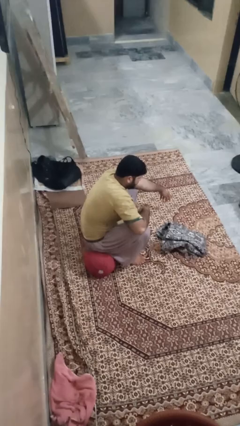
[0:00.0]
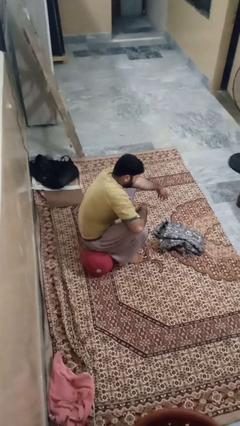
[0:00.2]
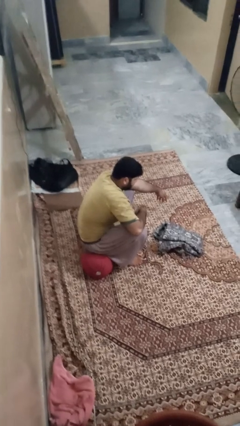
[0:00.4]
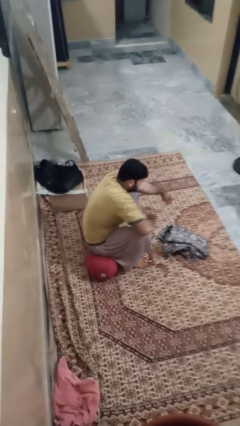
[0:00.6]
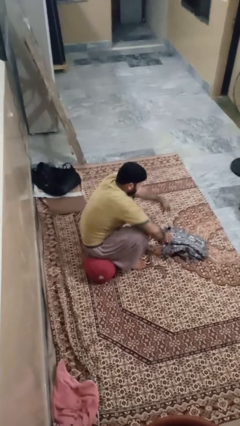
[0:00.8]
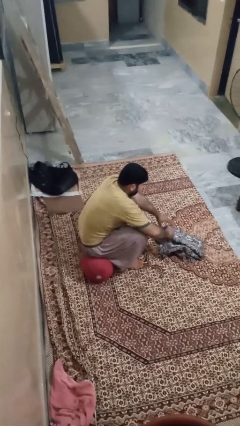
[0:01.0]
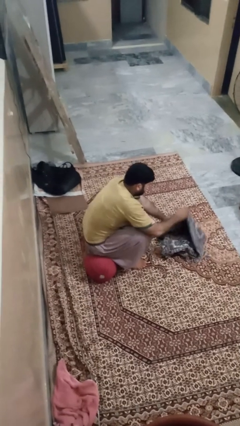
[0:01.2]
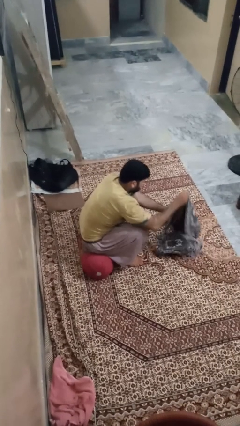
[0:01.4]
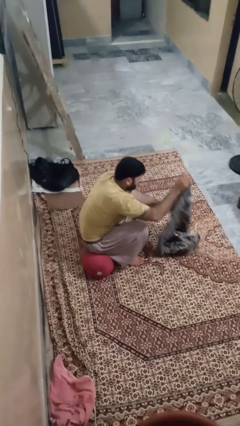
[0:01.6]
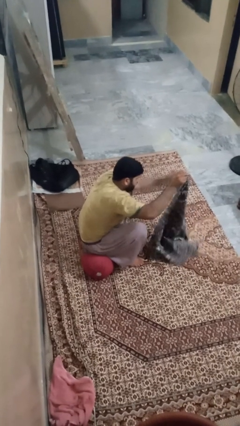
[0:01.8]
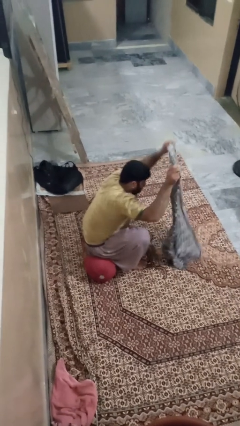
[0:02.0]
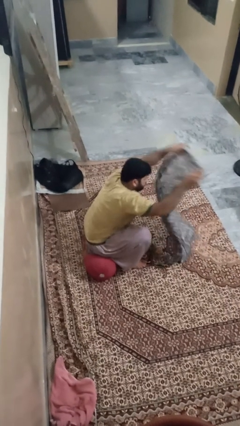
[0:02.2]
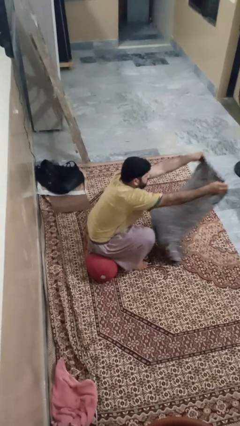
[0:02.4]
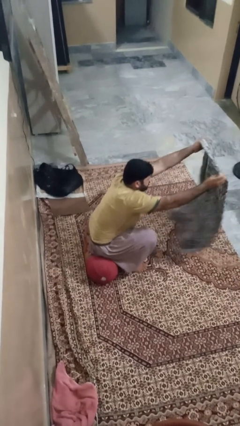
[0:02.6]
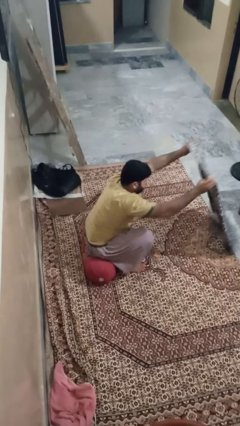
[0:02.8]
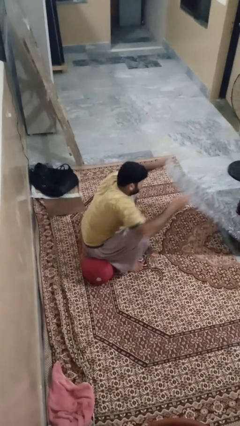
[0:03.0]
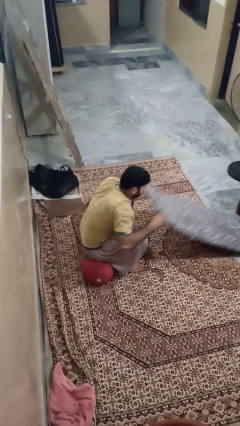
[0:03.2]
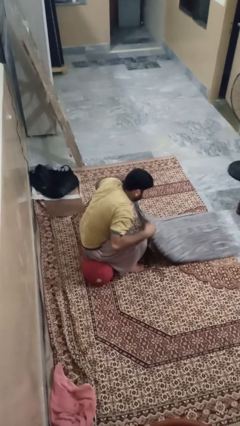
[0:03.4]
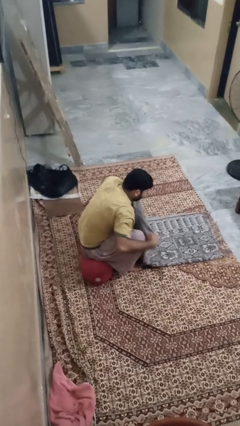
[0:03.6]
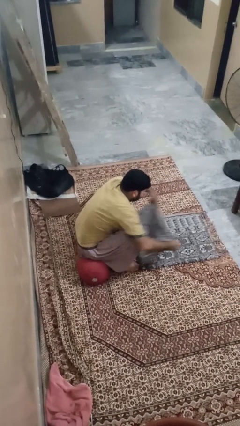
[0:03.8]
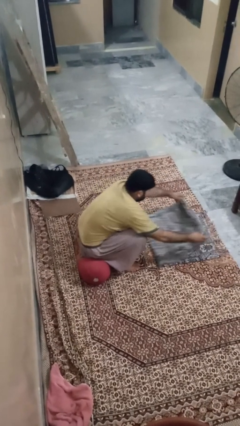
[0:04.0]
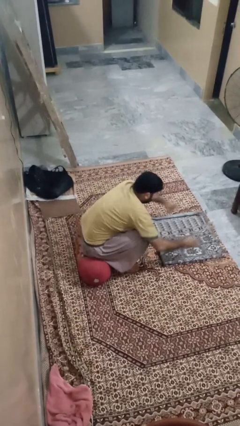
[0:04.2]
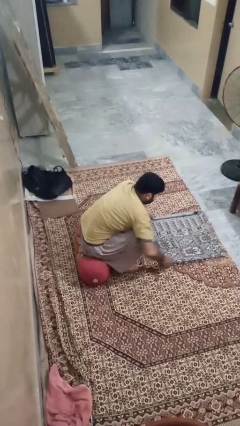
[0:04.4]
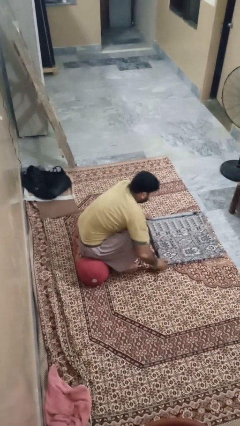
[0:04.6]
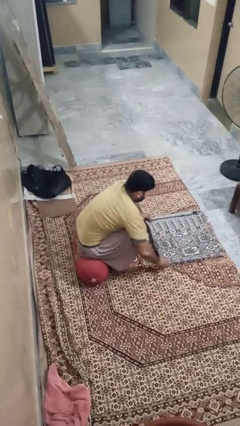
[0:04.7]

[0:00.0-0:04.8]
person folds blanket

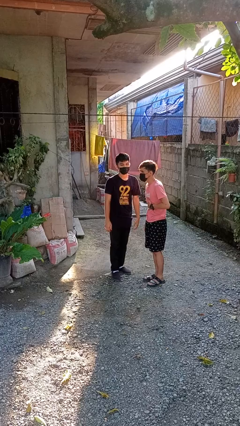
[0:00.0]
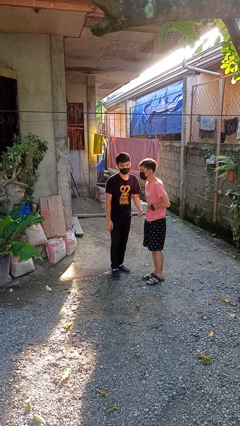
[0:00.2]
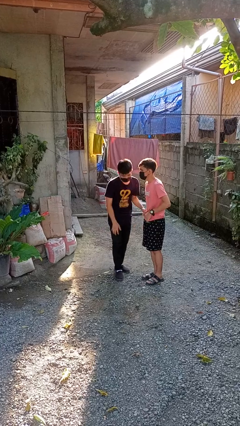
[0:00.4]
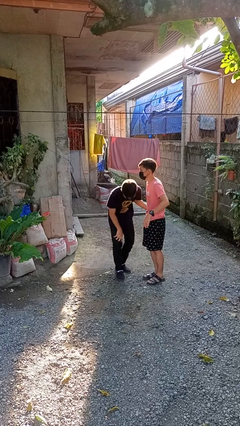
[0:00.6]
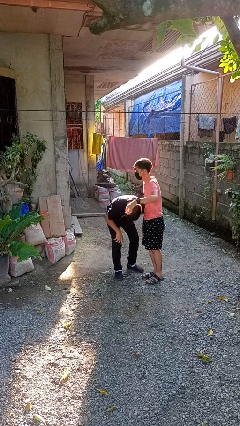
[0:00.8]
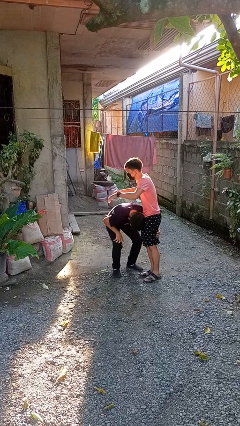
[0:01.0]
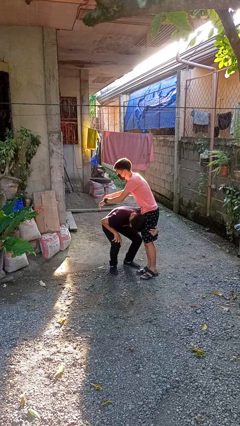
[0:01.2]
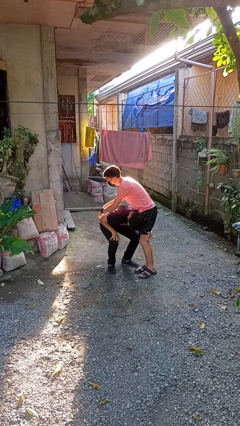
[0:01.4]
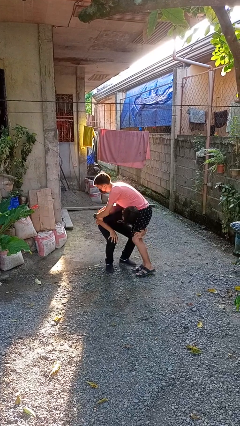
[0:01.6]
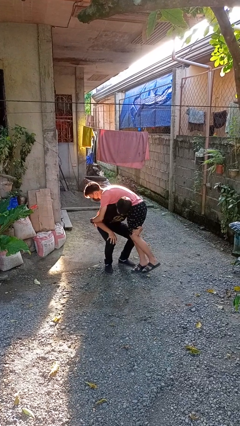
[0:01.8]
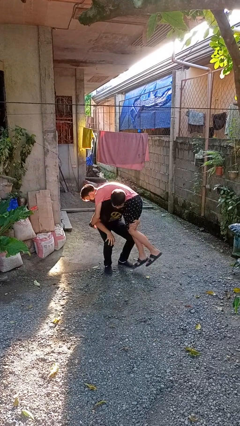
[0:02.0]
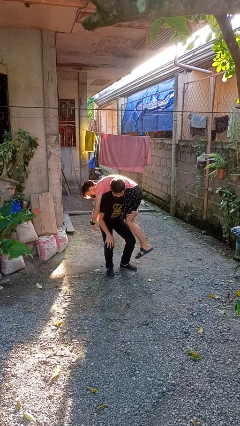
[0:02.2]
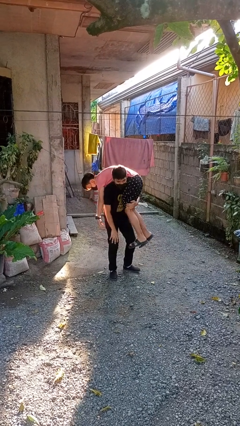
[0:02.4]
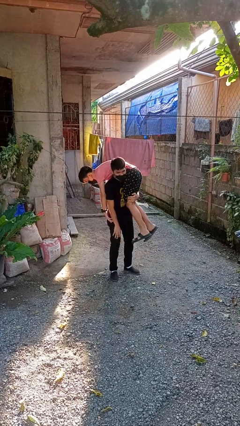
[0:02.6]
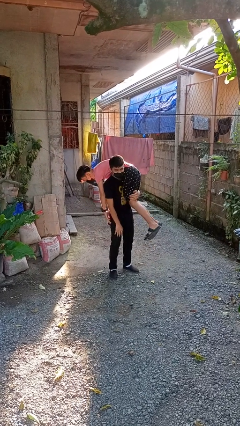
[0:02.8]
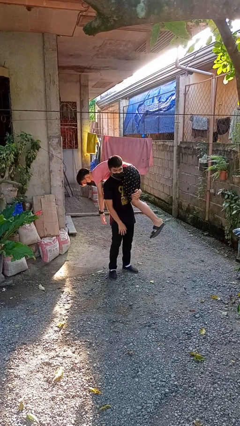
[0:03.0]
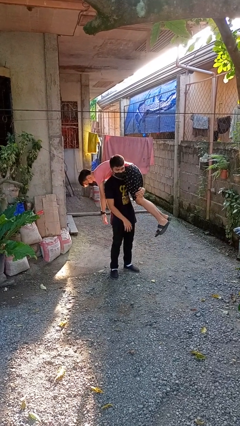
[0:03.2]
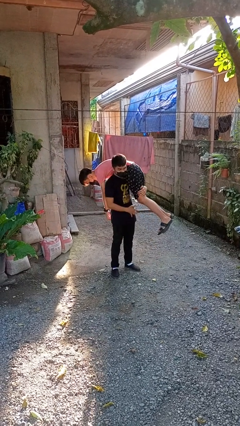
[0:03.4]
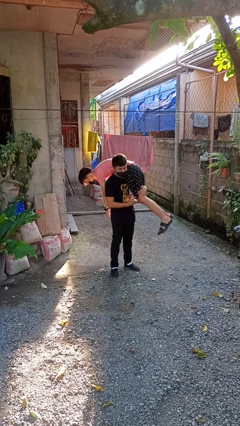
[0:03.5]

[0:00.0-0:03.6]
person carries person over shoulder

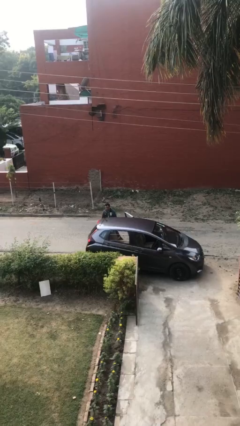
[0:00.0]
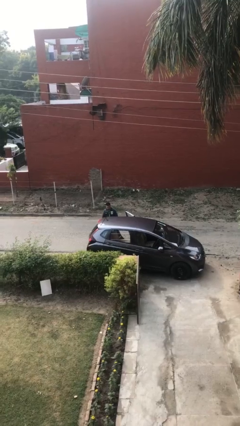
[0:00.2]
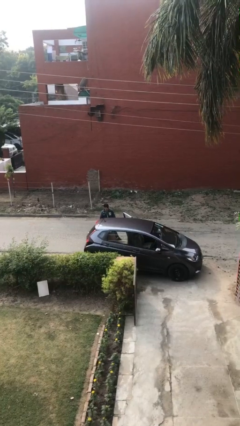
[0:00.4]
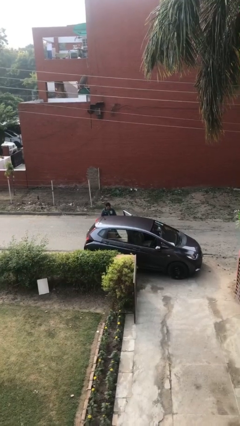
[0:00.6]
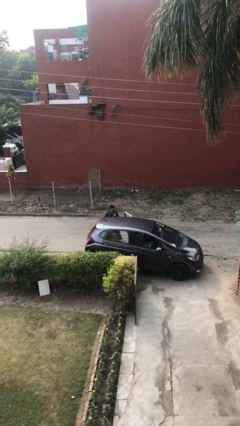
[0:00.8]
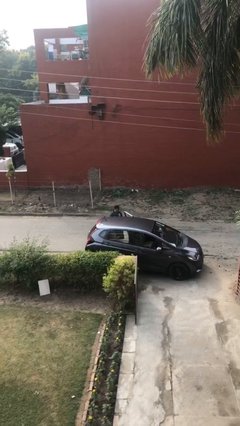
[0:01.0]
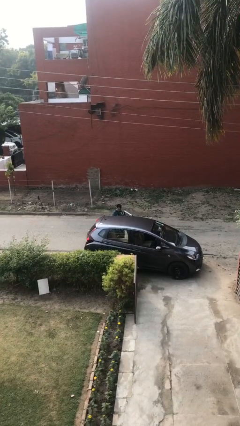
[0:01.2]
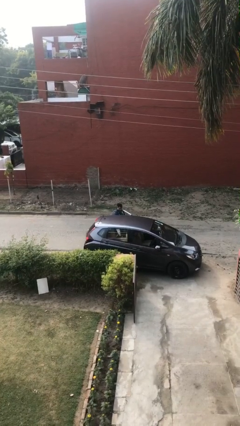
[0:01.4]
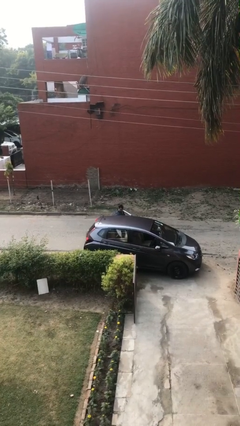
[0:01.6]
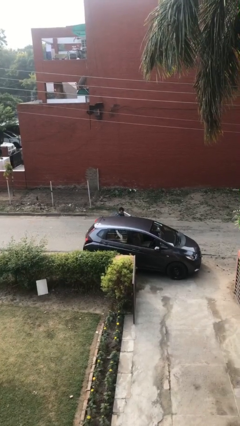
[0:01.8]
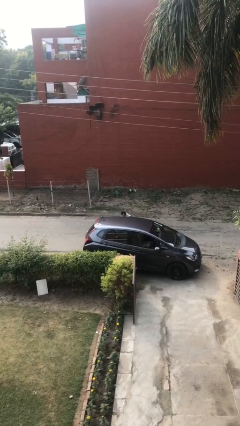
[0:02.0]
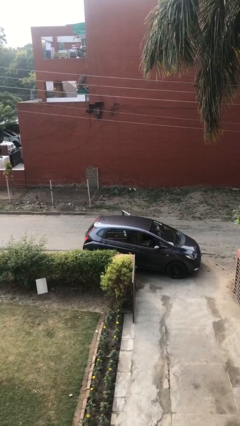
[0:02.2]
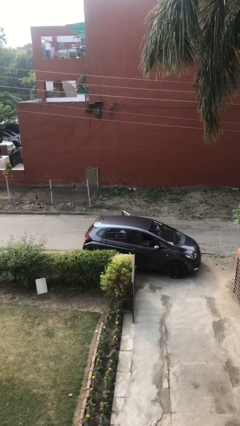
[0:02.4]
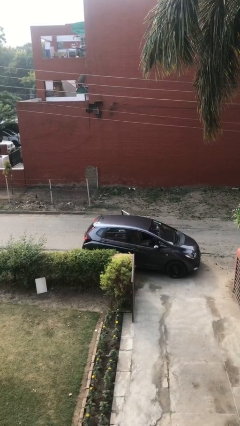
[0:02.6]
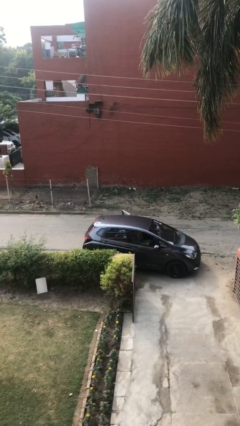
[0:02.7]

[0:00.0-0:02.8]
person enters car

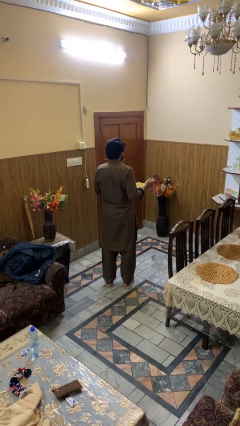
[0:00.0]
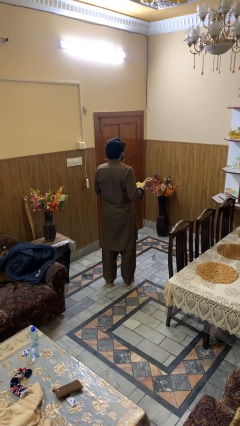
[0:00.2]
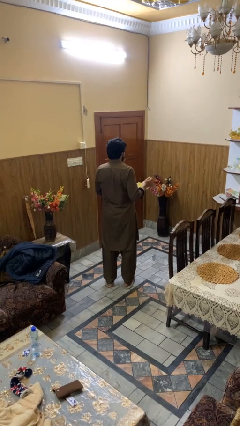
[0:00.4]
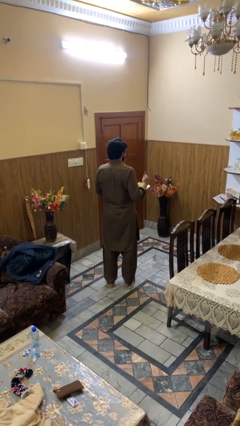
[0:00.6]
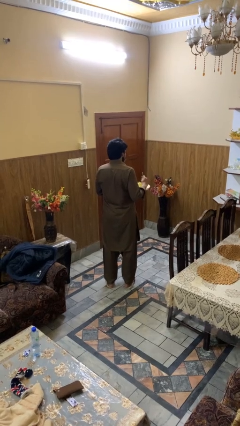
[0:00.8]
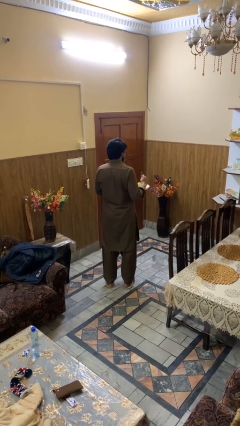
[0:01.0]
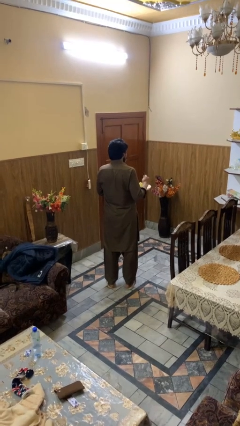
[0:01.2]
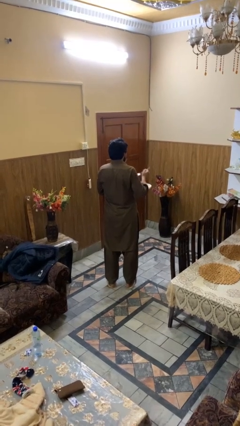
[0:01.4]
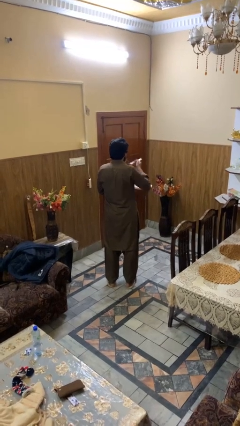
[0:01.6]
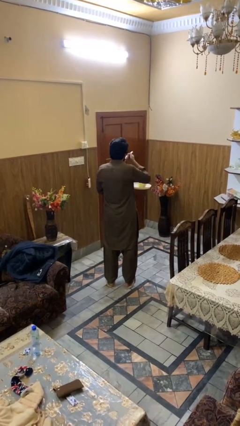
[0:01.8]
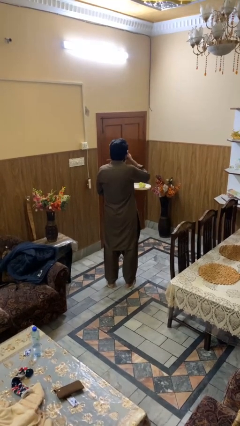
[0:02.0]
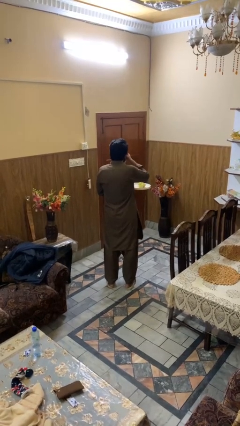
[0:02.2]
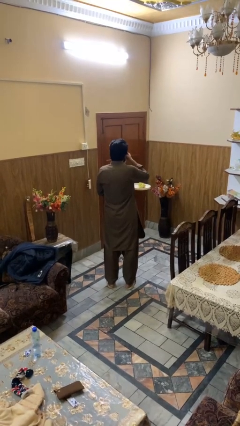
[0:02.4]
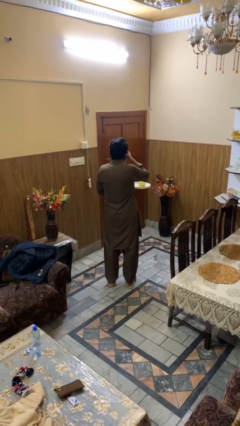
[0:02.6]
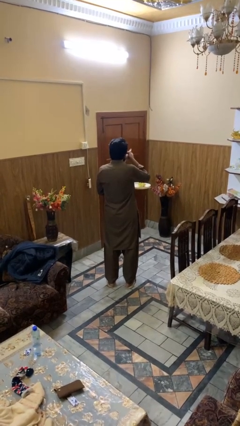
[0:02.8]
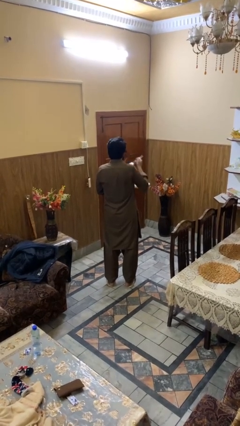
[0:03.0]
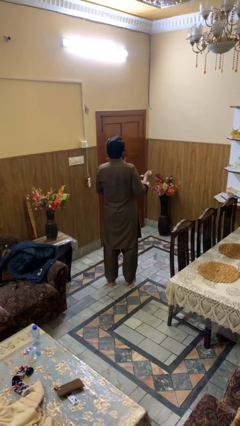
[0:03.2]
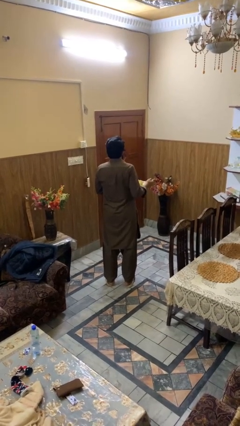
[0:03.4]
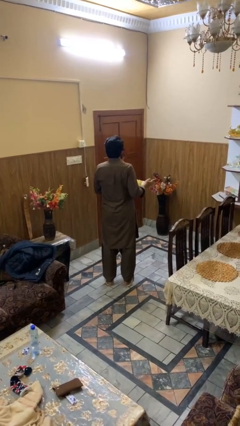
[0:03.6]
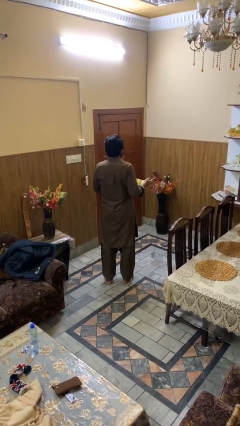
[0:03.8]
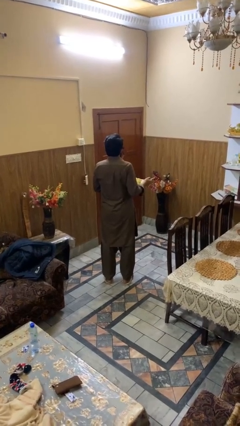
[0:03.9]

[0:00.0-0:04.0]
person eats with utensil

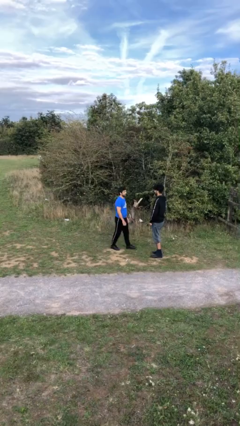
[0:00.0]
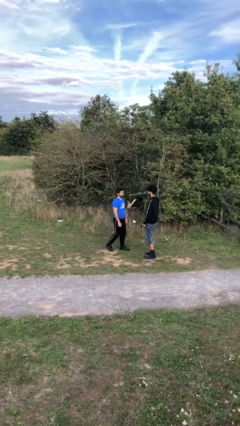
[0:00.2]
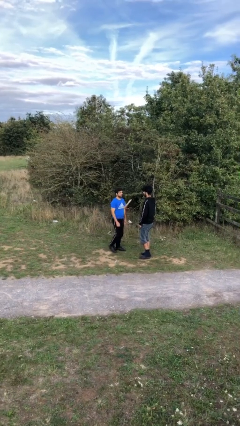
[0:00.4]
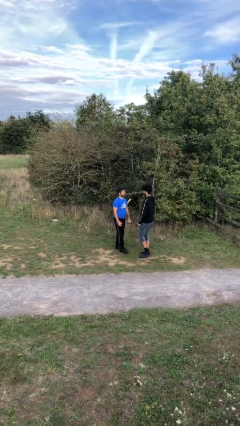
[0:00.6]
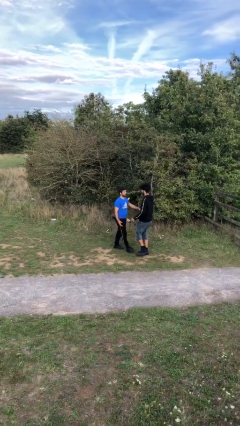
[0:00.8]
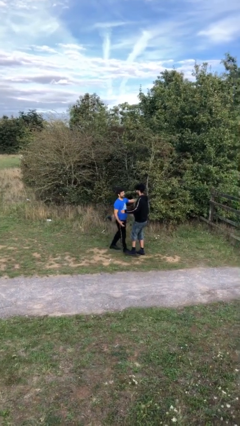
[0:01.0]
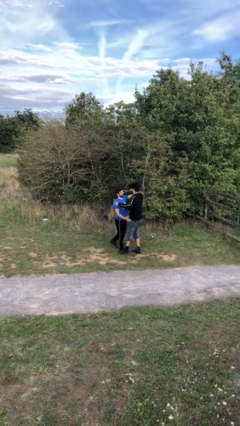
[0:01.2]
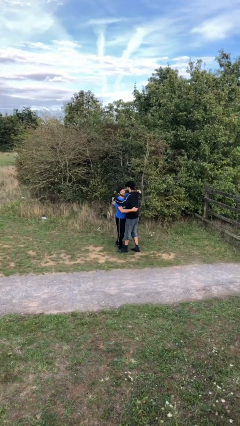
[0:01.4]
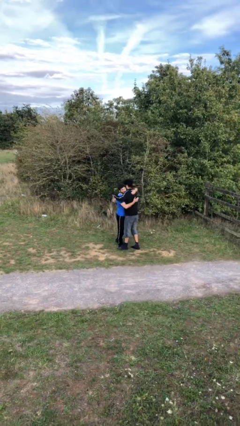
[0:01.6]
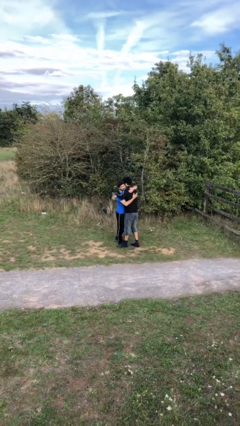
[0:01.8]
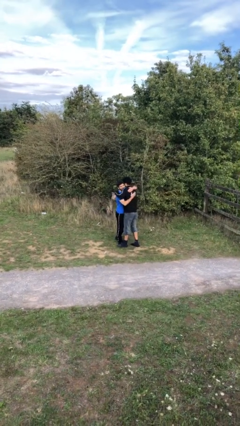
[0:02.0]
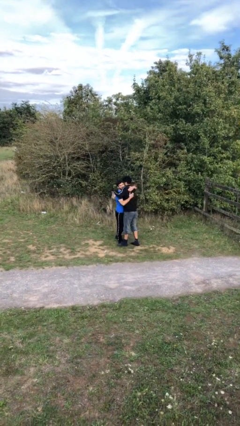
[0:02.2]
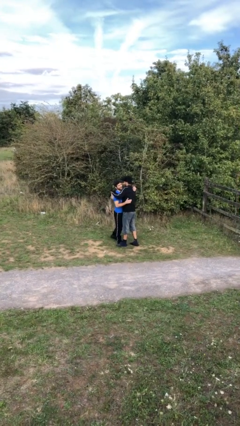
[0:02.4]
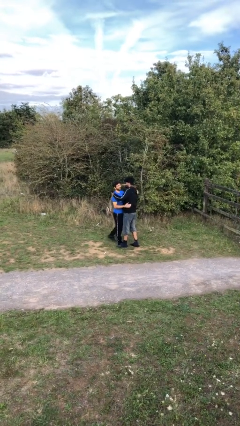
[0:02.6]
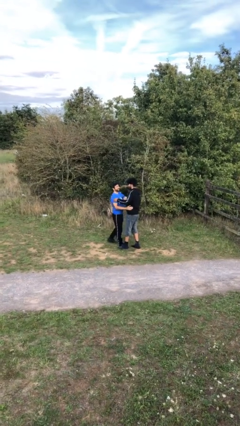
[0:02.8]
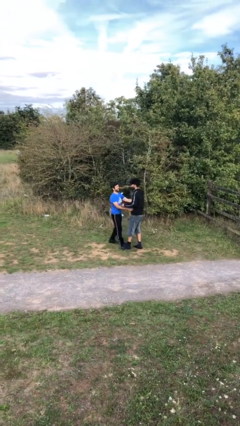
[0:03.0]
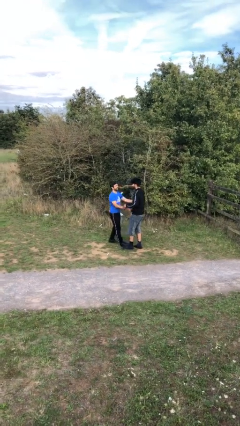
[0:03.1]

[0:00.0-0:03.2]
person embraces person
